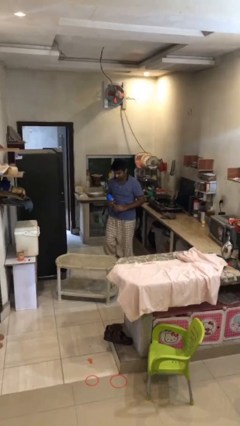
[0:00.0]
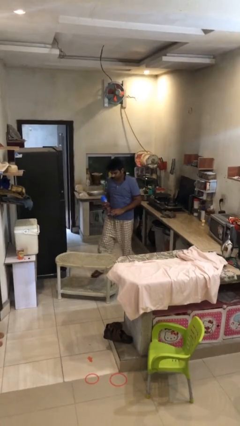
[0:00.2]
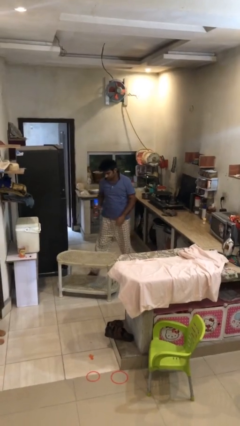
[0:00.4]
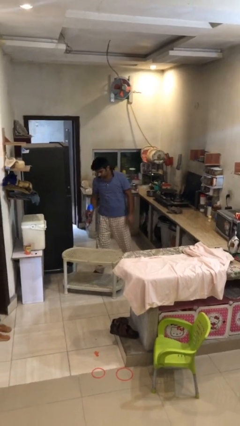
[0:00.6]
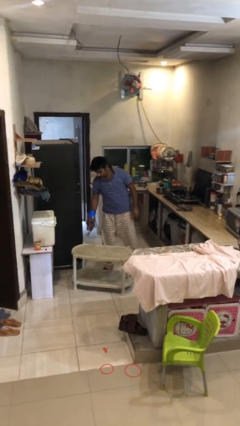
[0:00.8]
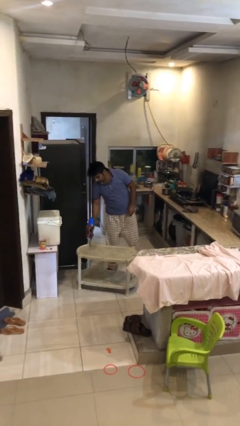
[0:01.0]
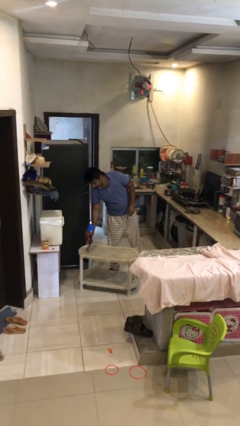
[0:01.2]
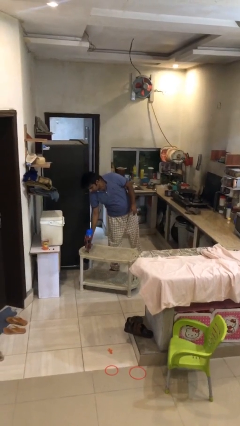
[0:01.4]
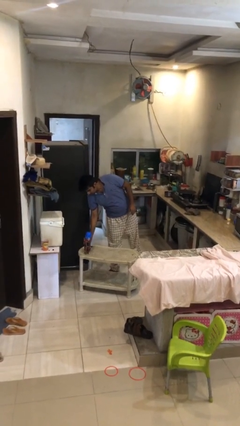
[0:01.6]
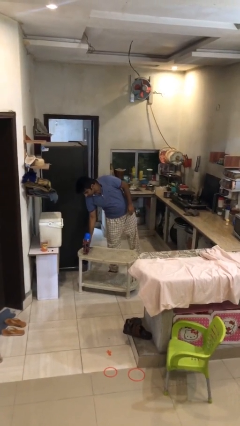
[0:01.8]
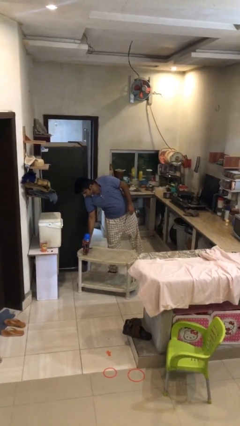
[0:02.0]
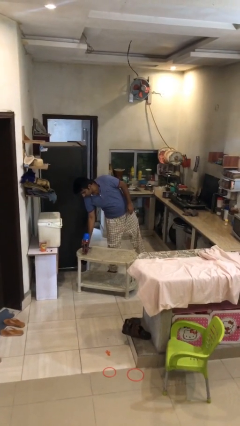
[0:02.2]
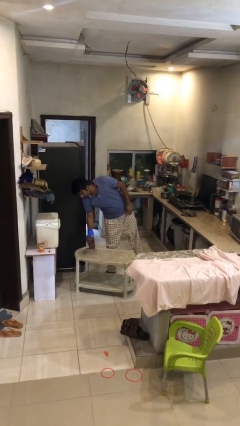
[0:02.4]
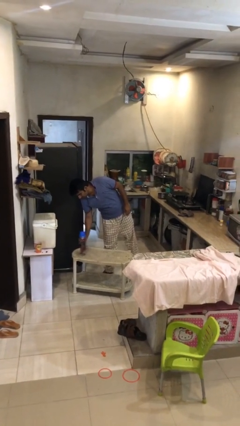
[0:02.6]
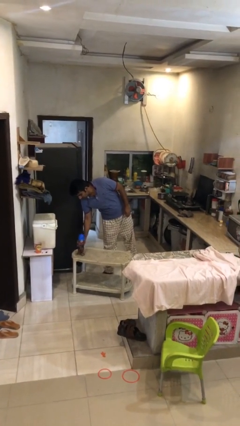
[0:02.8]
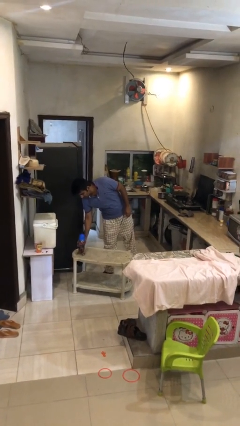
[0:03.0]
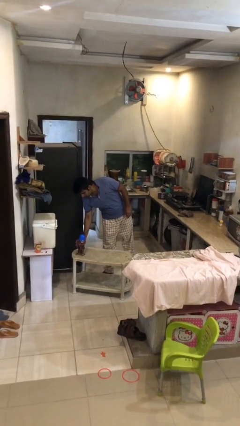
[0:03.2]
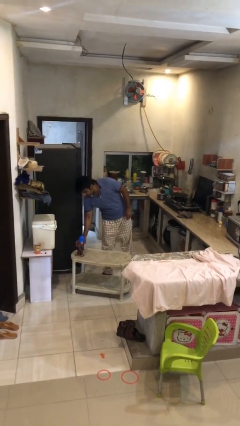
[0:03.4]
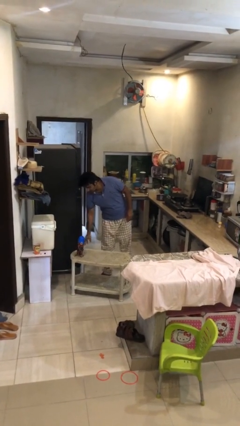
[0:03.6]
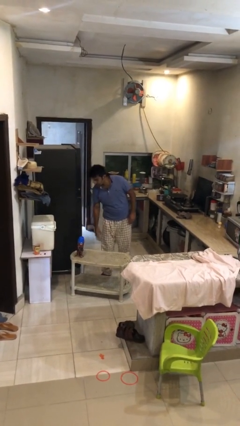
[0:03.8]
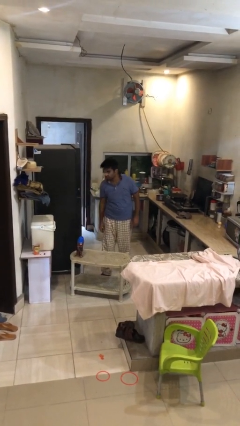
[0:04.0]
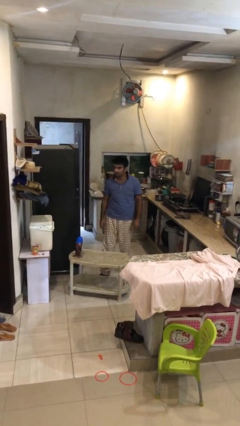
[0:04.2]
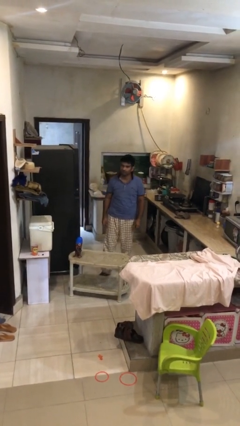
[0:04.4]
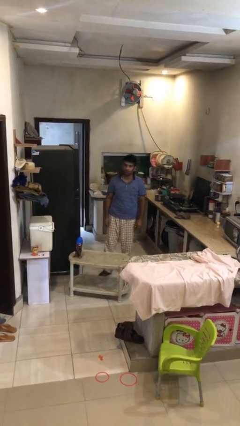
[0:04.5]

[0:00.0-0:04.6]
person puts down object on table

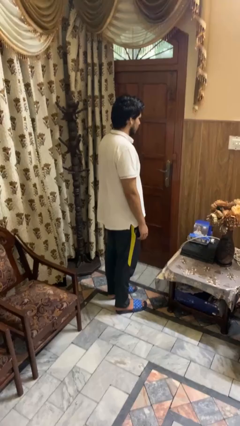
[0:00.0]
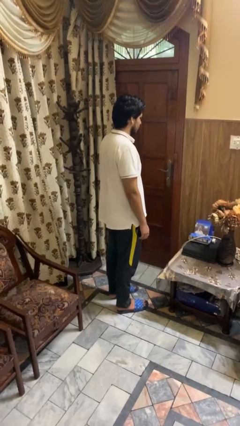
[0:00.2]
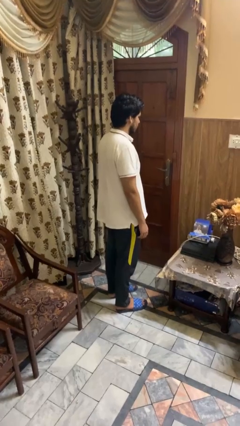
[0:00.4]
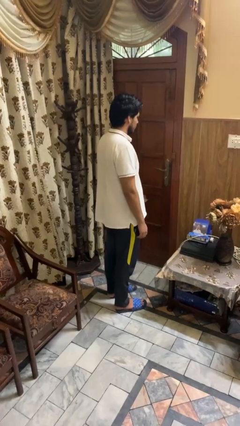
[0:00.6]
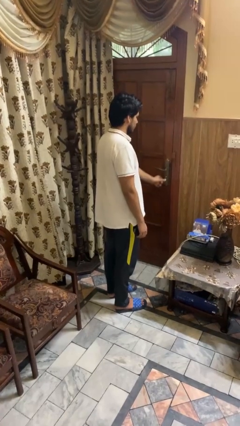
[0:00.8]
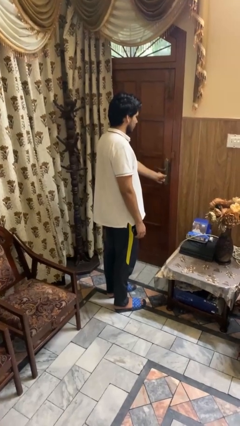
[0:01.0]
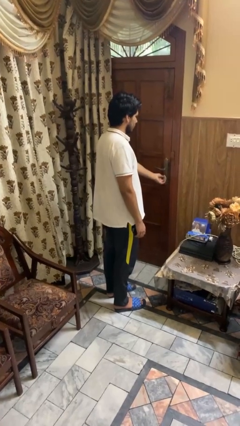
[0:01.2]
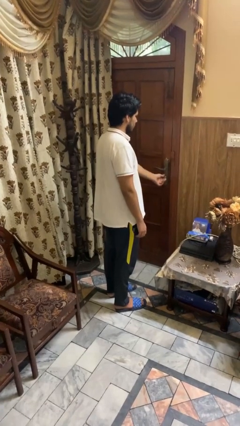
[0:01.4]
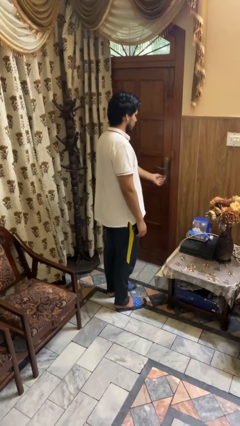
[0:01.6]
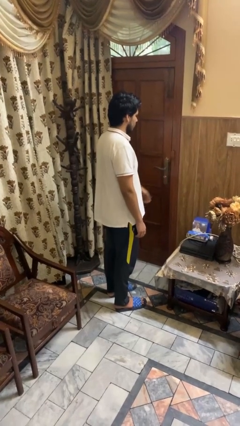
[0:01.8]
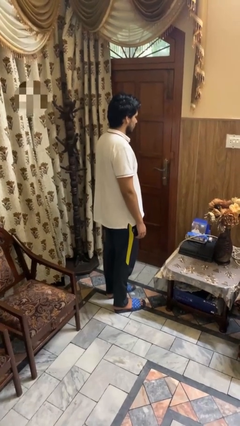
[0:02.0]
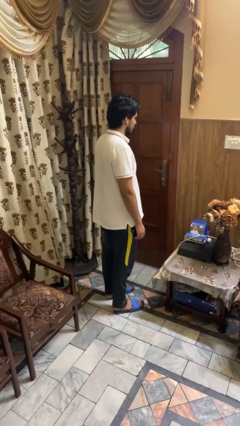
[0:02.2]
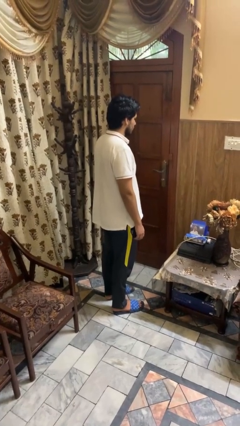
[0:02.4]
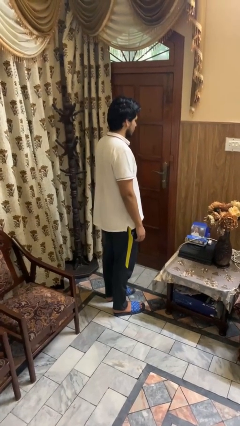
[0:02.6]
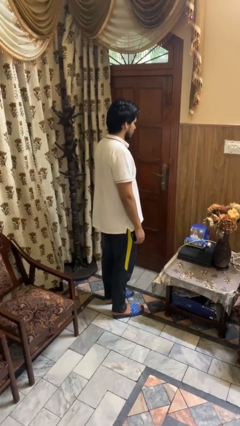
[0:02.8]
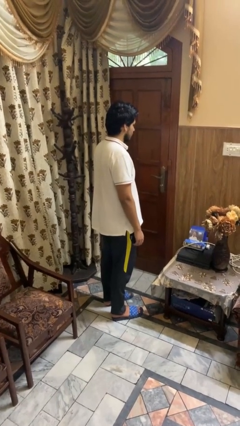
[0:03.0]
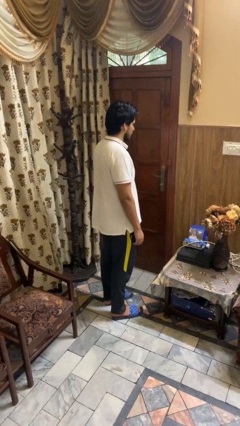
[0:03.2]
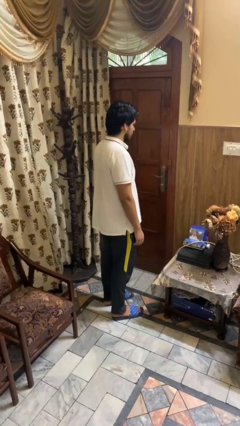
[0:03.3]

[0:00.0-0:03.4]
person unlocks door with keys

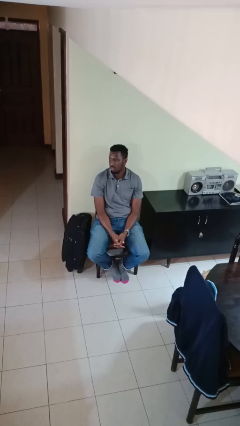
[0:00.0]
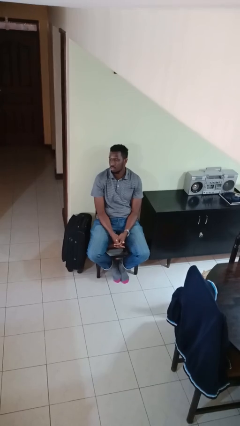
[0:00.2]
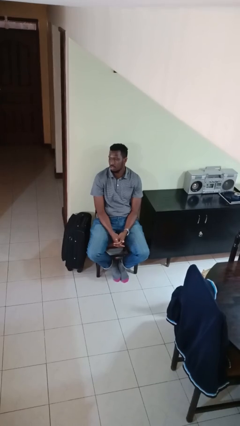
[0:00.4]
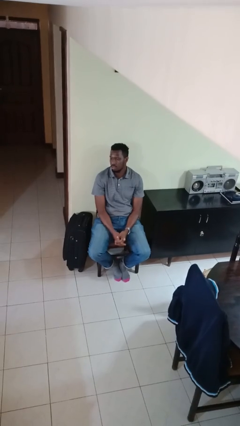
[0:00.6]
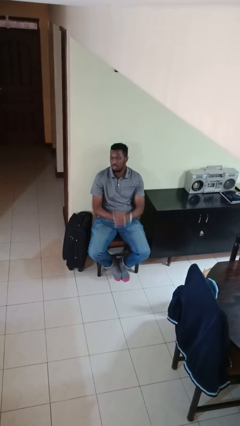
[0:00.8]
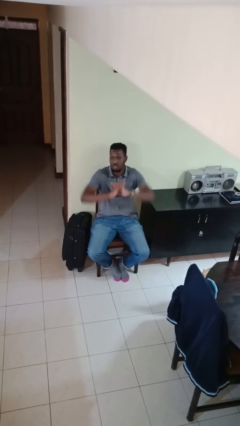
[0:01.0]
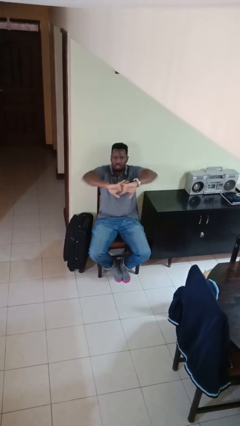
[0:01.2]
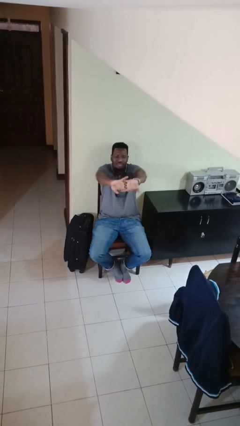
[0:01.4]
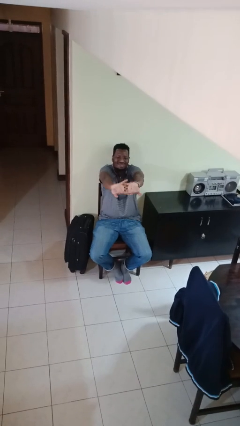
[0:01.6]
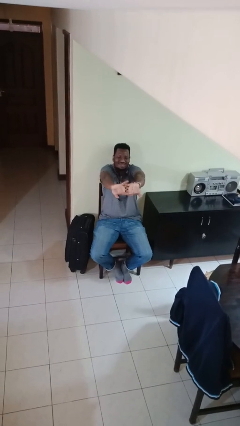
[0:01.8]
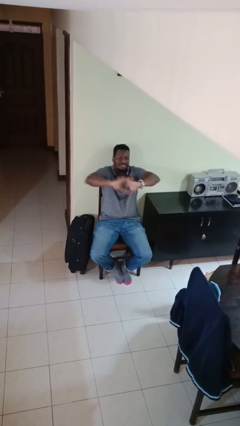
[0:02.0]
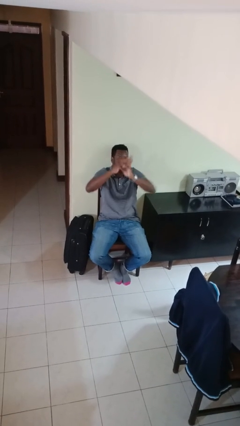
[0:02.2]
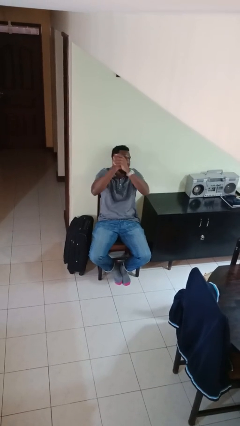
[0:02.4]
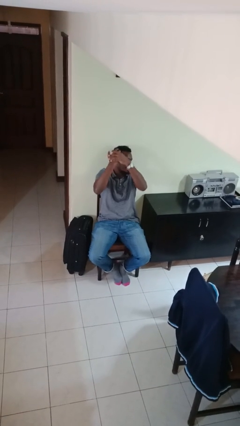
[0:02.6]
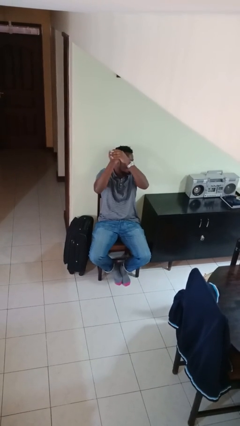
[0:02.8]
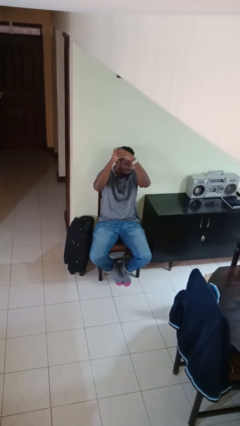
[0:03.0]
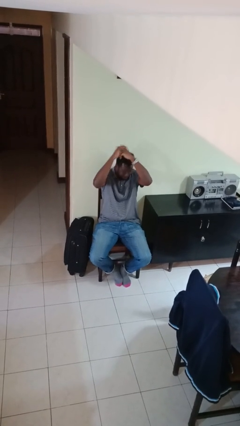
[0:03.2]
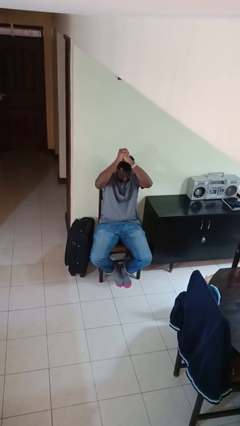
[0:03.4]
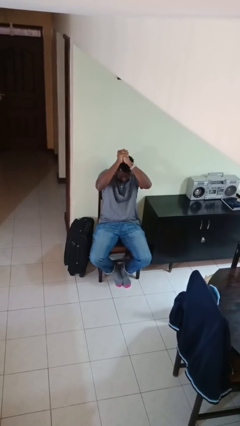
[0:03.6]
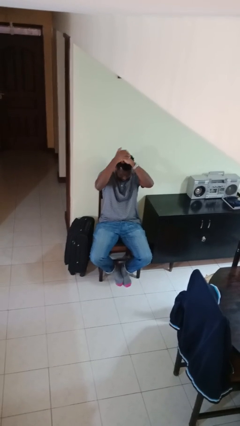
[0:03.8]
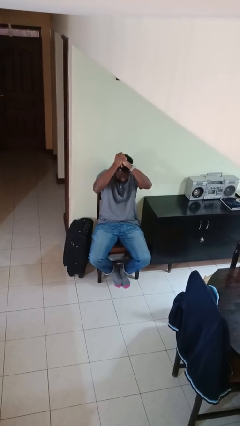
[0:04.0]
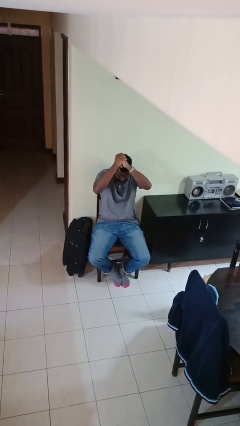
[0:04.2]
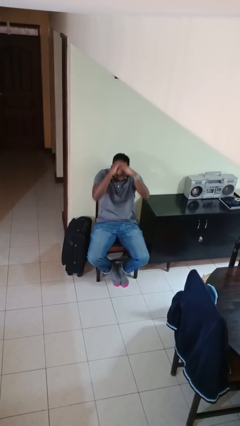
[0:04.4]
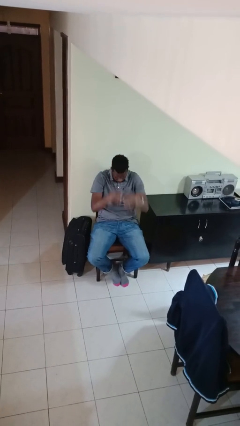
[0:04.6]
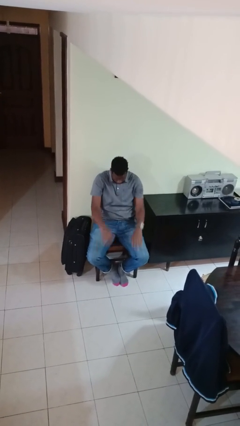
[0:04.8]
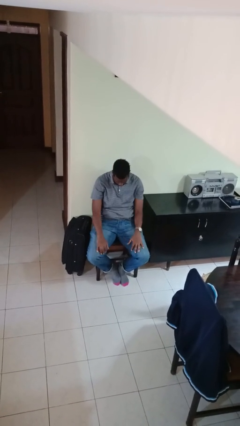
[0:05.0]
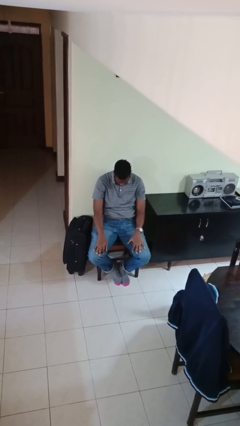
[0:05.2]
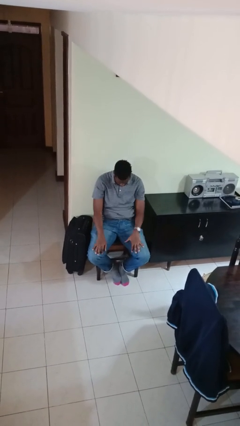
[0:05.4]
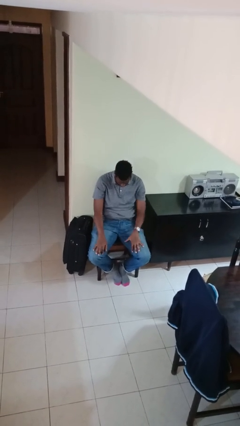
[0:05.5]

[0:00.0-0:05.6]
person cracks knuckles

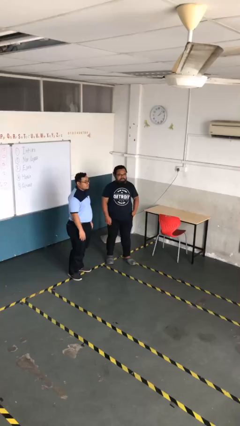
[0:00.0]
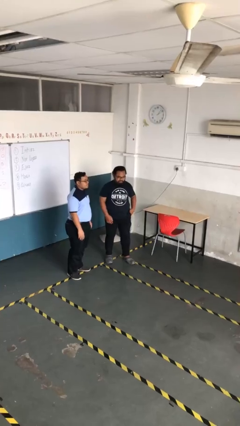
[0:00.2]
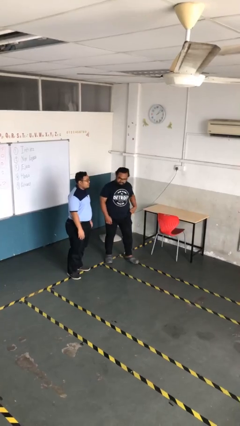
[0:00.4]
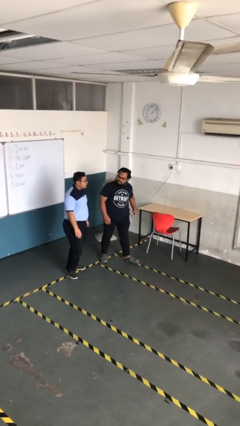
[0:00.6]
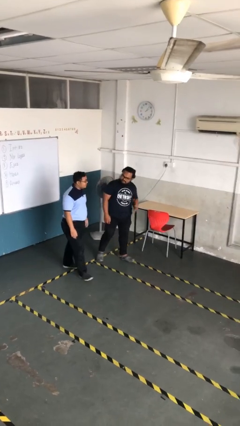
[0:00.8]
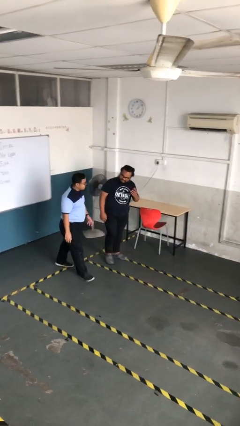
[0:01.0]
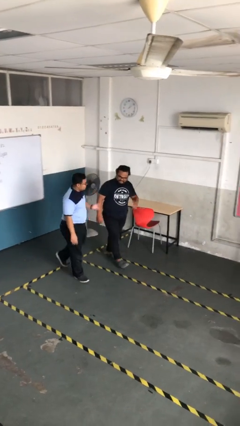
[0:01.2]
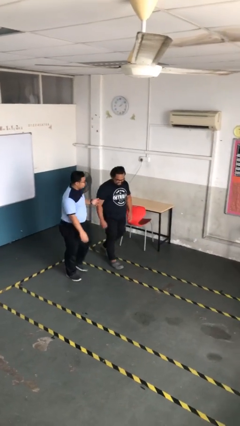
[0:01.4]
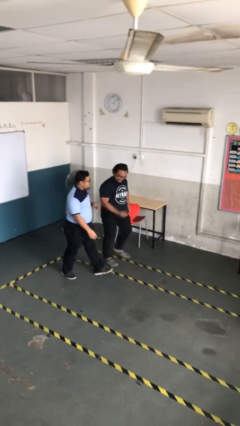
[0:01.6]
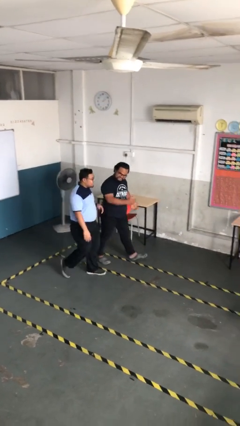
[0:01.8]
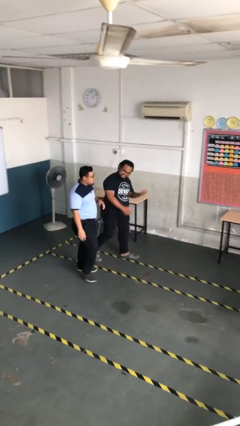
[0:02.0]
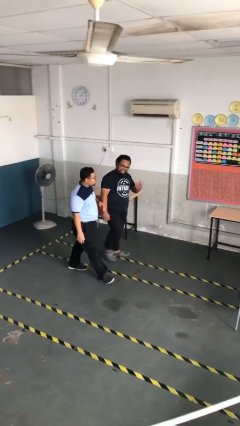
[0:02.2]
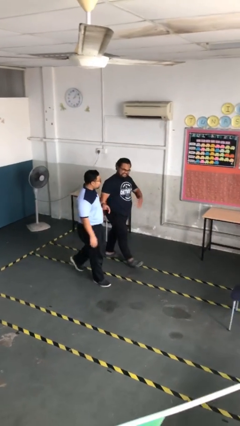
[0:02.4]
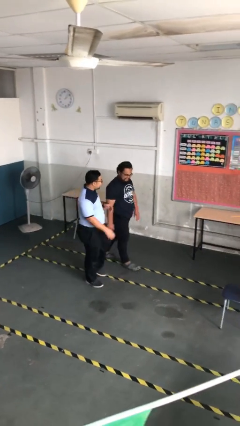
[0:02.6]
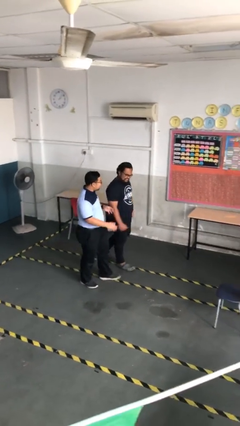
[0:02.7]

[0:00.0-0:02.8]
person talks to person

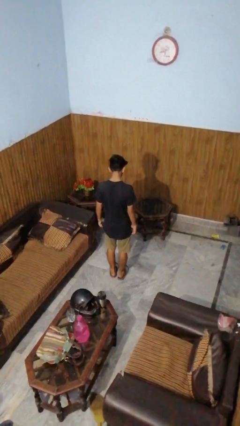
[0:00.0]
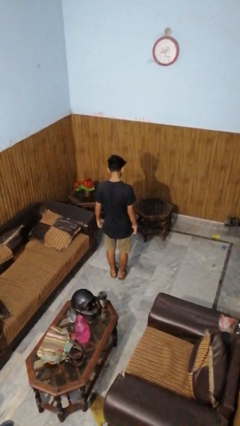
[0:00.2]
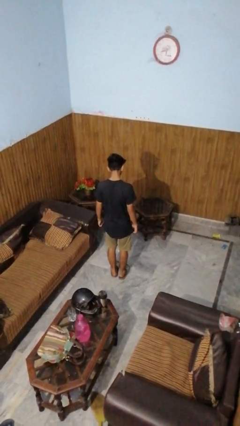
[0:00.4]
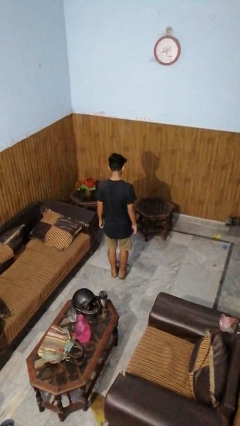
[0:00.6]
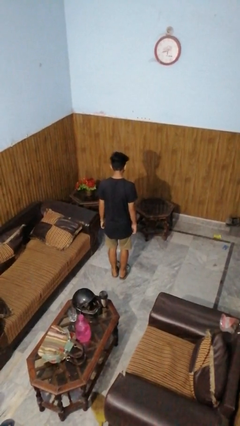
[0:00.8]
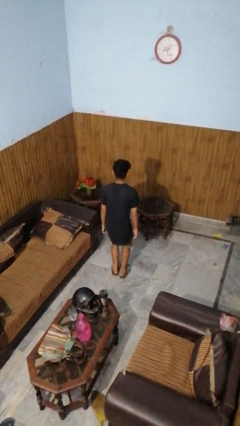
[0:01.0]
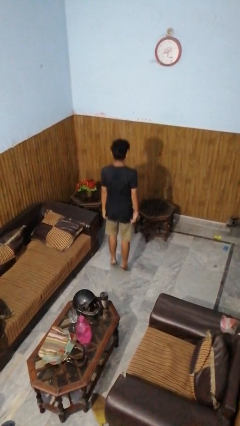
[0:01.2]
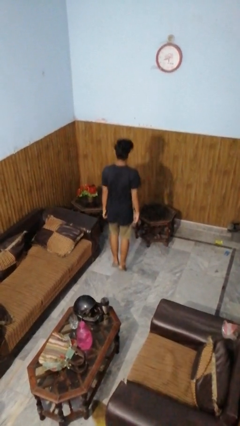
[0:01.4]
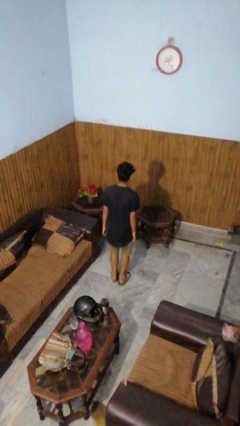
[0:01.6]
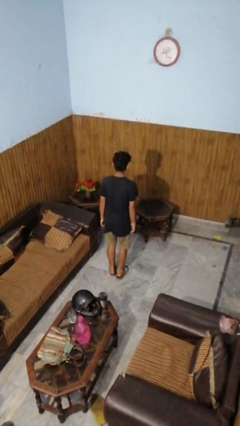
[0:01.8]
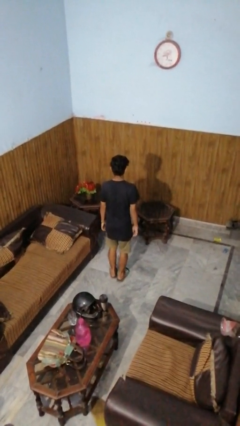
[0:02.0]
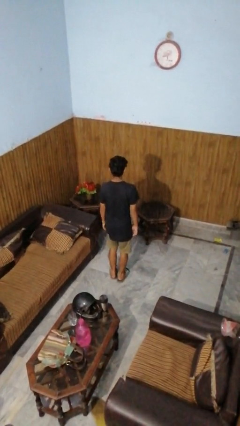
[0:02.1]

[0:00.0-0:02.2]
person jumps
